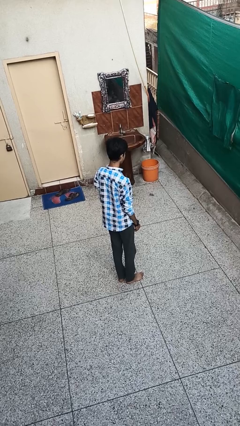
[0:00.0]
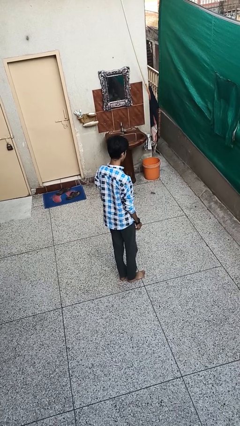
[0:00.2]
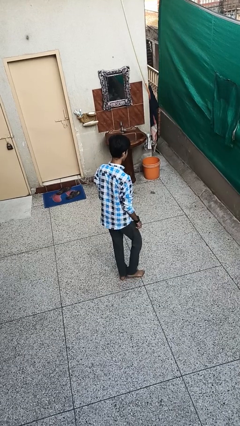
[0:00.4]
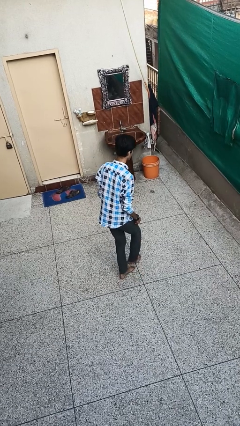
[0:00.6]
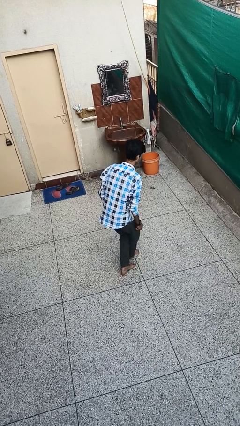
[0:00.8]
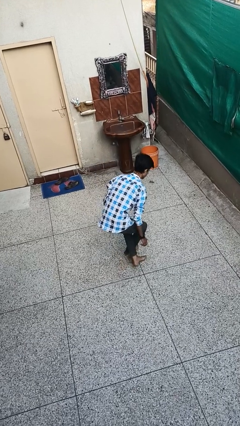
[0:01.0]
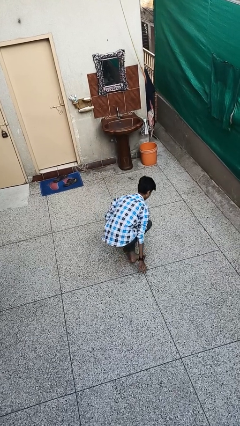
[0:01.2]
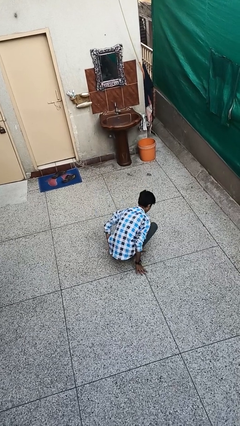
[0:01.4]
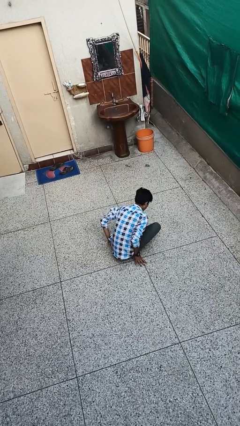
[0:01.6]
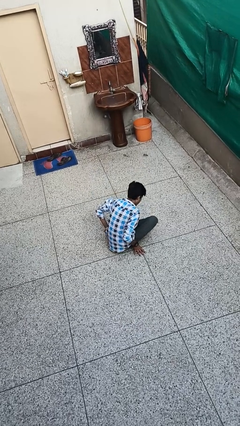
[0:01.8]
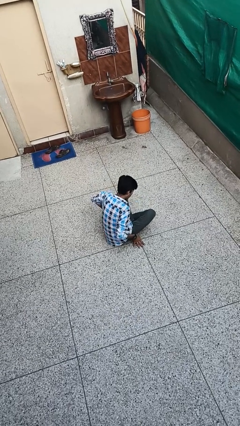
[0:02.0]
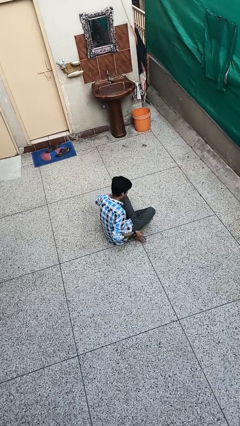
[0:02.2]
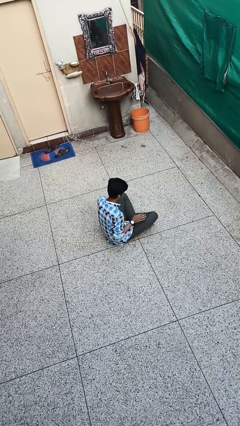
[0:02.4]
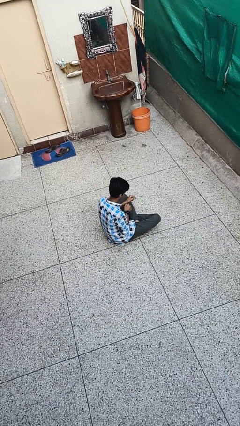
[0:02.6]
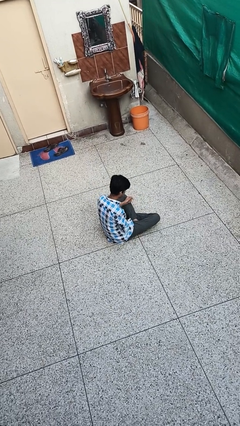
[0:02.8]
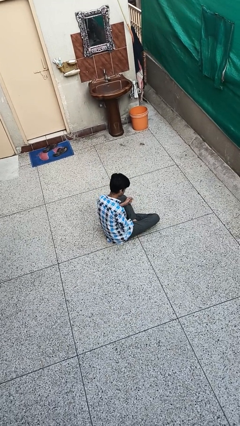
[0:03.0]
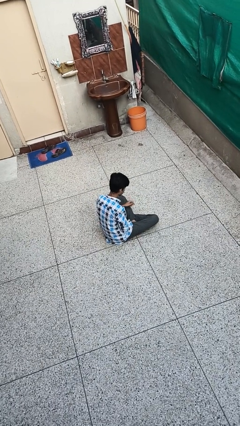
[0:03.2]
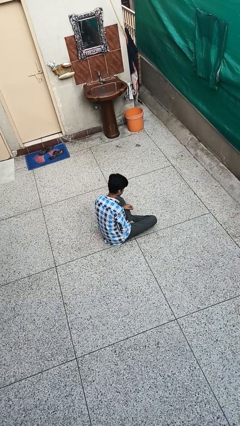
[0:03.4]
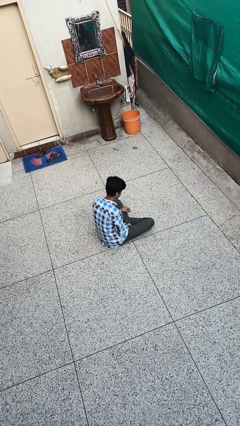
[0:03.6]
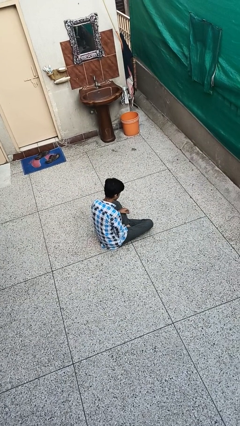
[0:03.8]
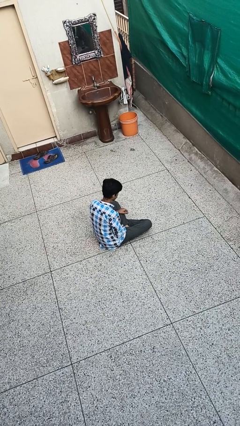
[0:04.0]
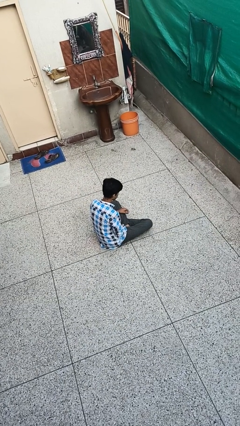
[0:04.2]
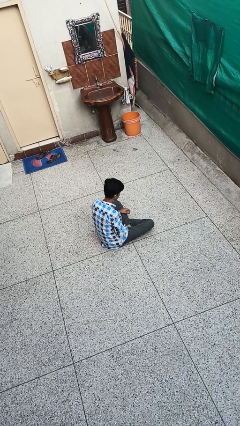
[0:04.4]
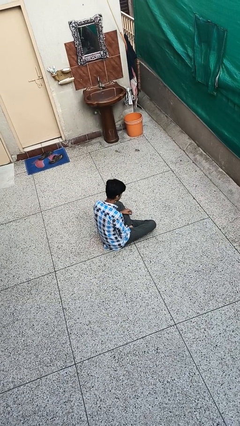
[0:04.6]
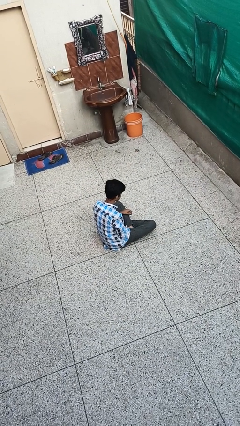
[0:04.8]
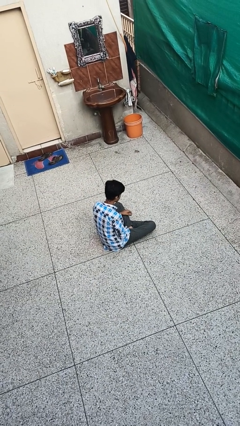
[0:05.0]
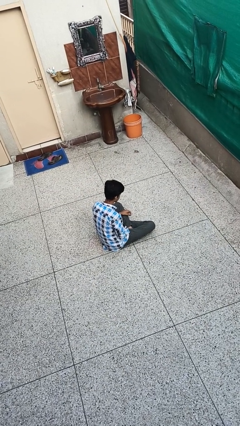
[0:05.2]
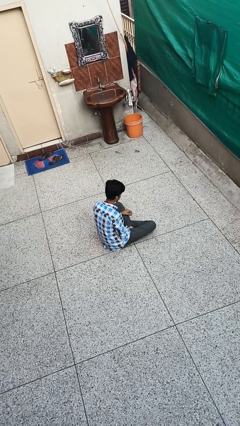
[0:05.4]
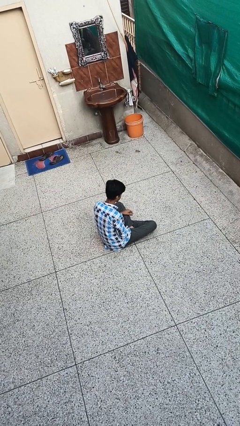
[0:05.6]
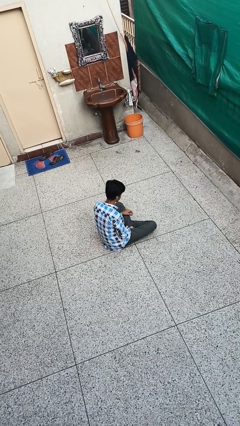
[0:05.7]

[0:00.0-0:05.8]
person sits crisscross

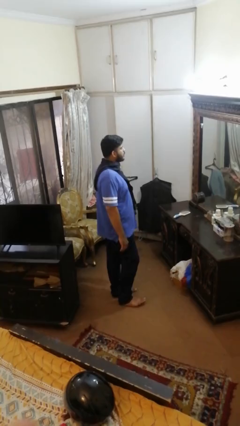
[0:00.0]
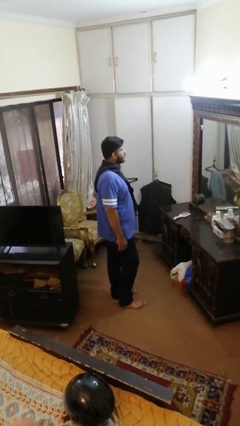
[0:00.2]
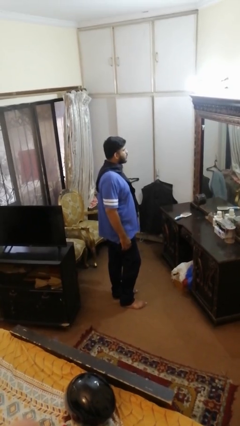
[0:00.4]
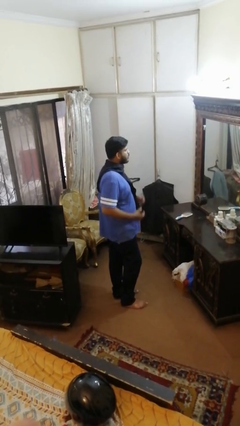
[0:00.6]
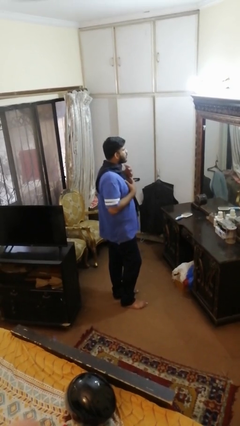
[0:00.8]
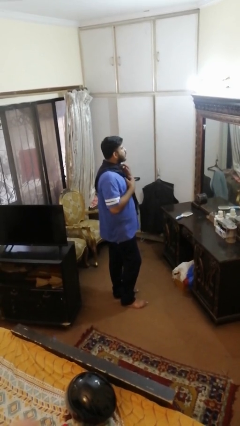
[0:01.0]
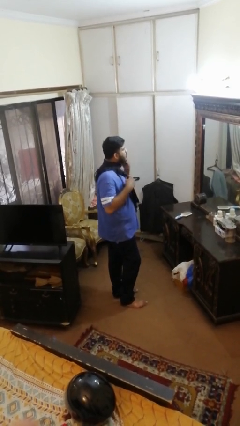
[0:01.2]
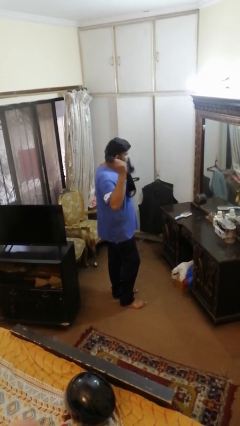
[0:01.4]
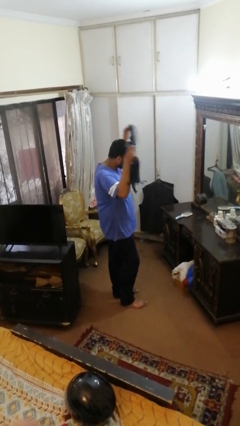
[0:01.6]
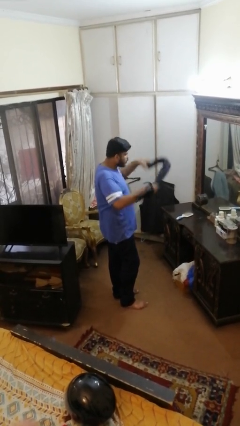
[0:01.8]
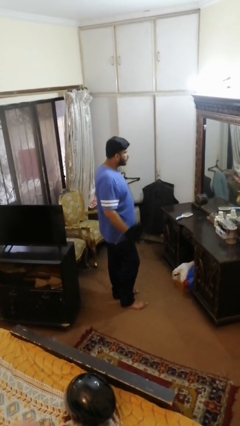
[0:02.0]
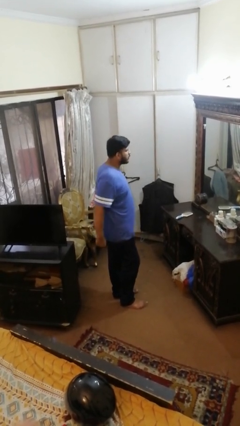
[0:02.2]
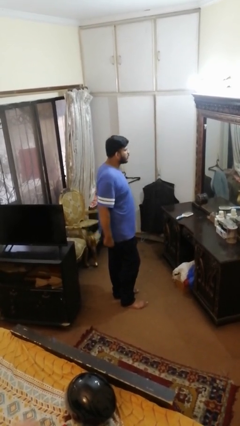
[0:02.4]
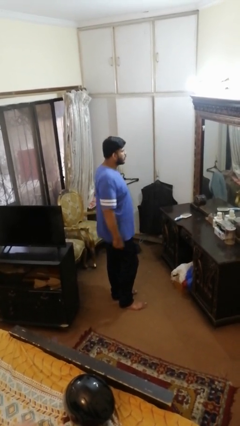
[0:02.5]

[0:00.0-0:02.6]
person takes off scarf

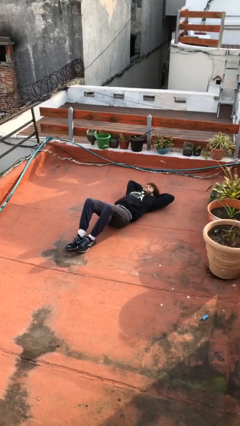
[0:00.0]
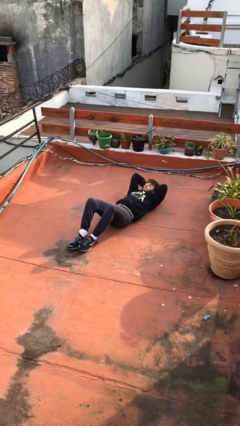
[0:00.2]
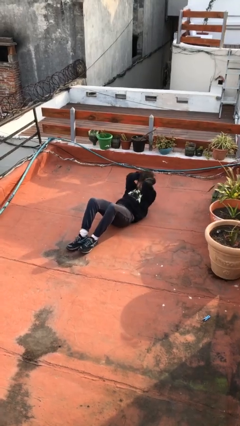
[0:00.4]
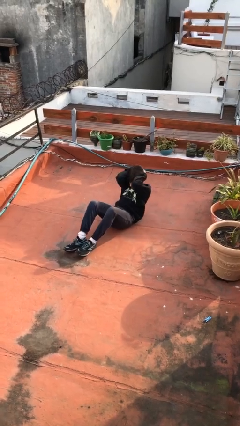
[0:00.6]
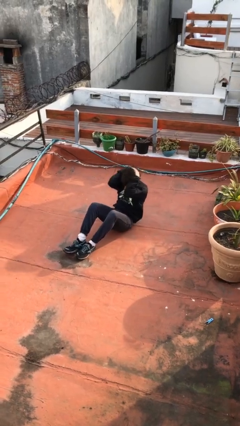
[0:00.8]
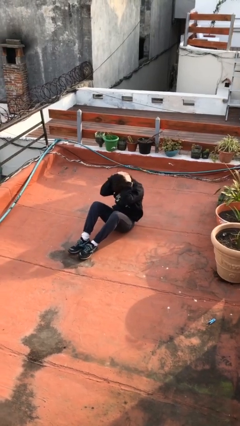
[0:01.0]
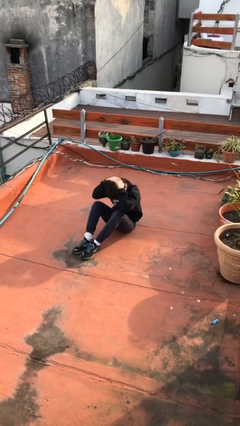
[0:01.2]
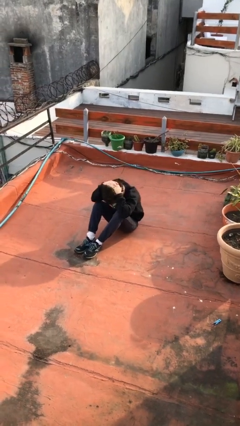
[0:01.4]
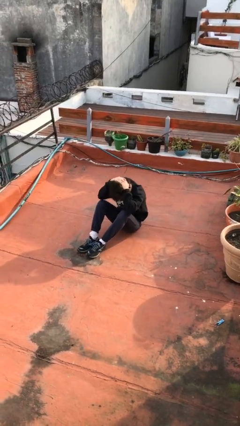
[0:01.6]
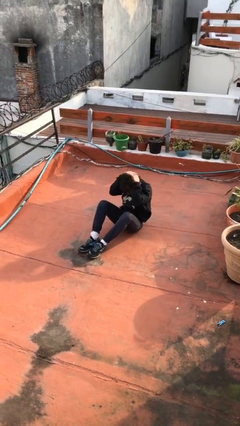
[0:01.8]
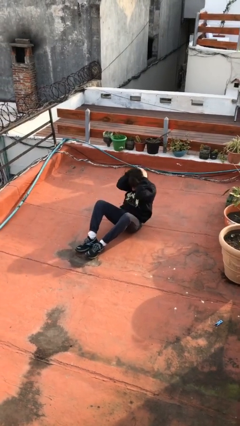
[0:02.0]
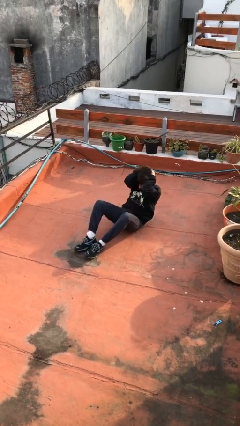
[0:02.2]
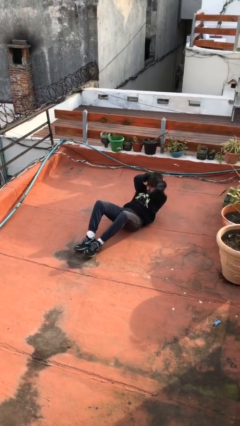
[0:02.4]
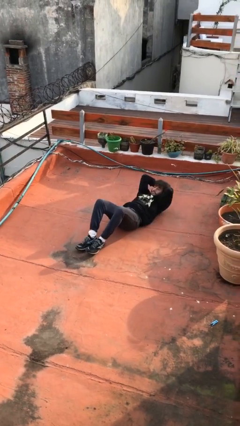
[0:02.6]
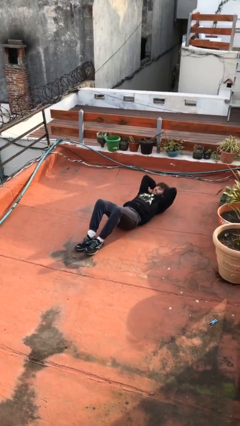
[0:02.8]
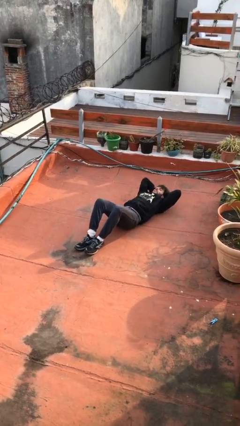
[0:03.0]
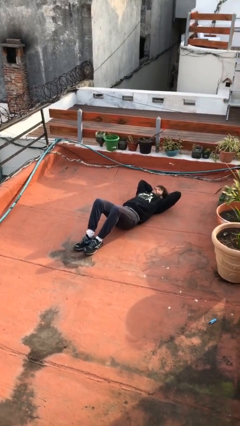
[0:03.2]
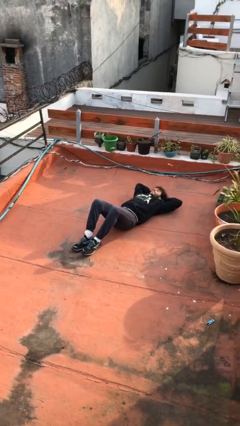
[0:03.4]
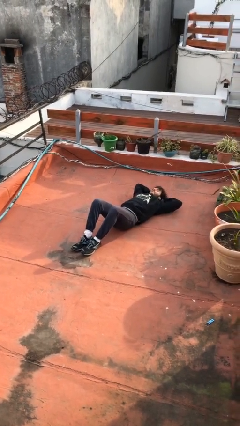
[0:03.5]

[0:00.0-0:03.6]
person exercises with situp

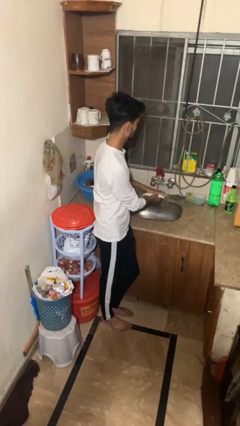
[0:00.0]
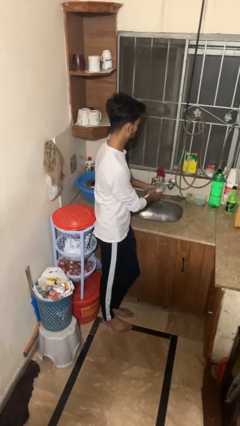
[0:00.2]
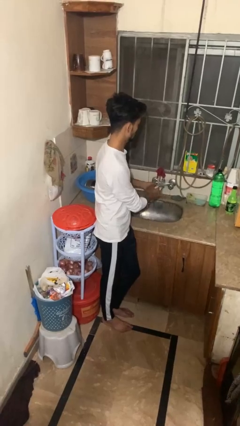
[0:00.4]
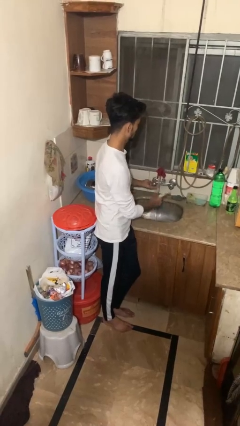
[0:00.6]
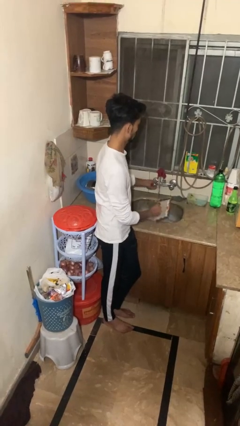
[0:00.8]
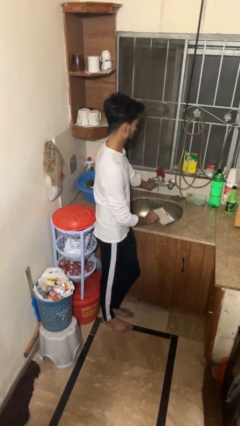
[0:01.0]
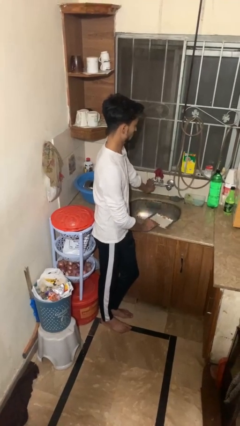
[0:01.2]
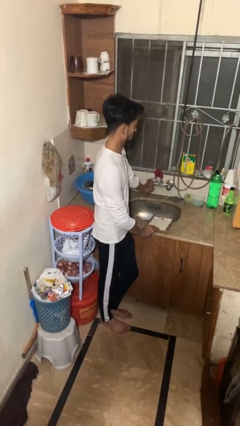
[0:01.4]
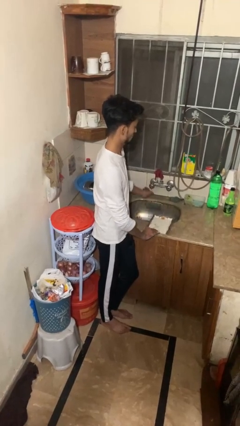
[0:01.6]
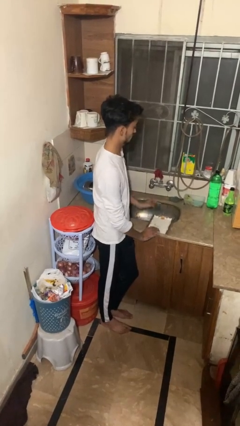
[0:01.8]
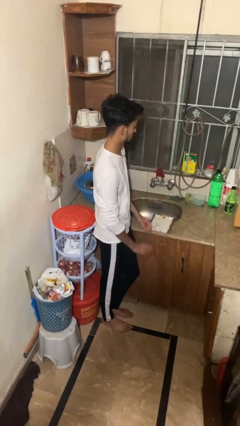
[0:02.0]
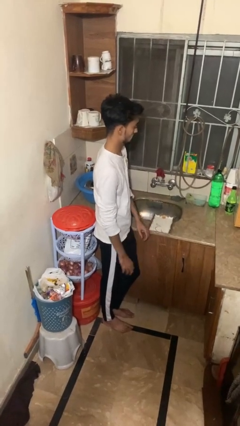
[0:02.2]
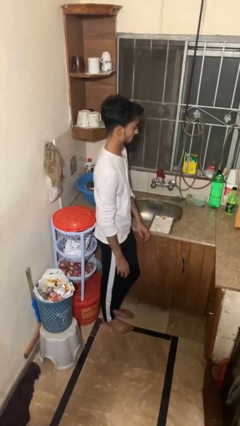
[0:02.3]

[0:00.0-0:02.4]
person closes dishwasher

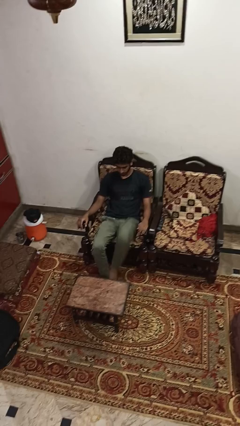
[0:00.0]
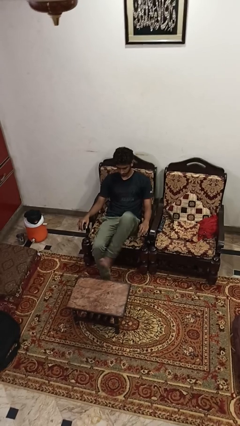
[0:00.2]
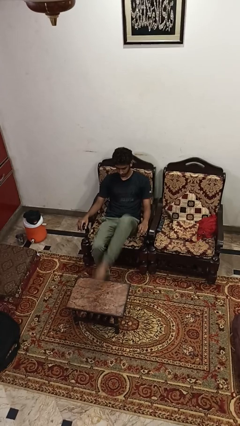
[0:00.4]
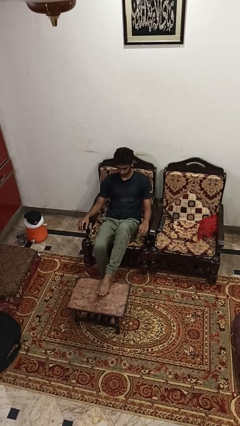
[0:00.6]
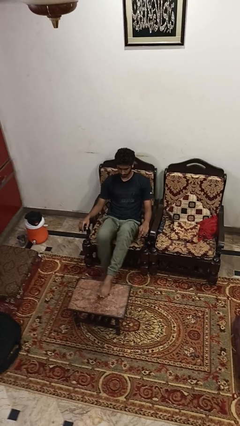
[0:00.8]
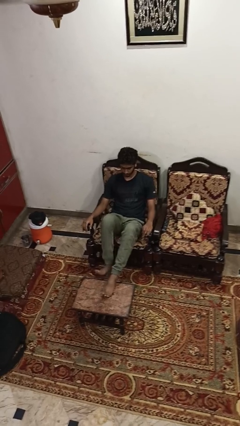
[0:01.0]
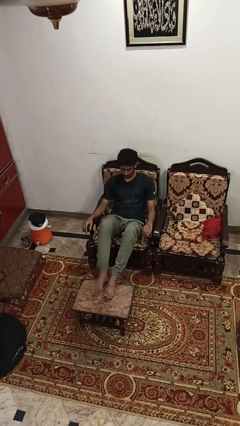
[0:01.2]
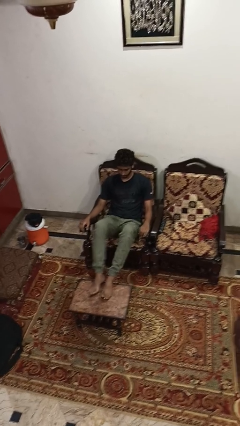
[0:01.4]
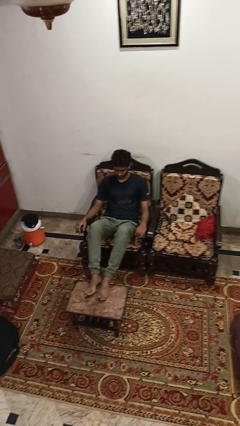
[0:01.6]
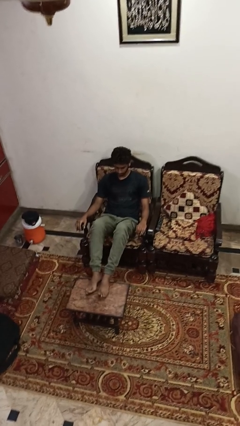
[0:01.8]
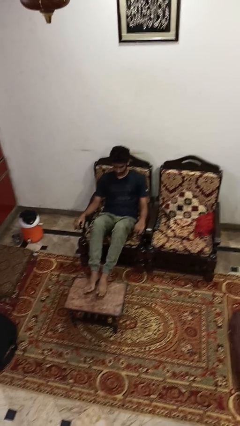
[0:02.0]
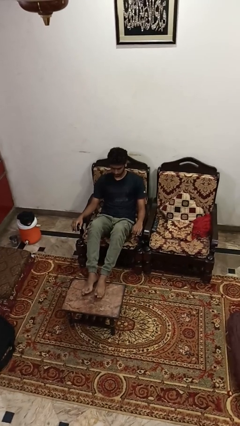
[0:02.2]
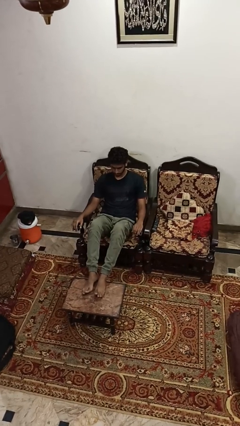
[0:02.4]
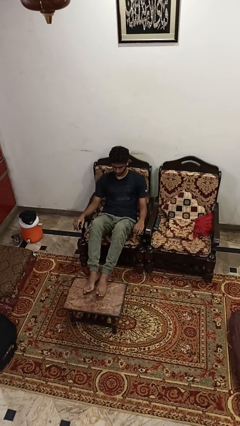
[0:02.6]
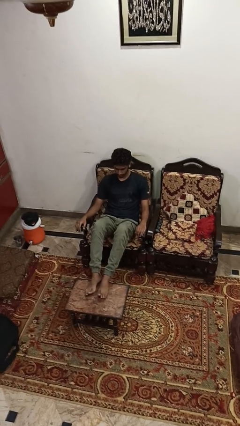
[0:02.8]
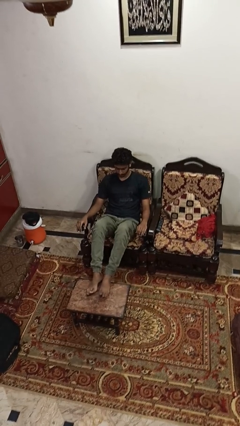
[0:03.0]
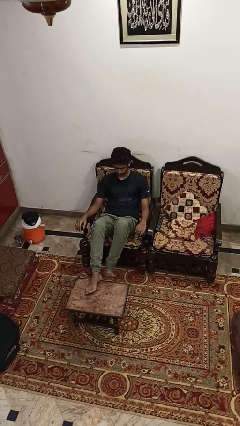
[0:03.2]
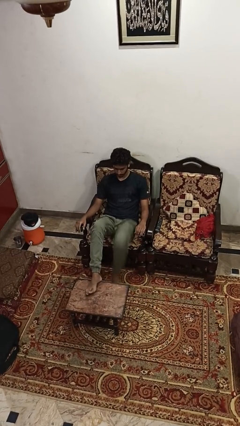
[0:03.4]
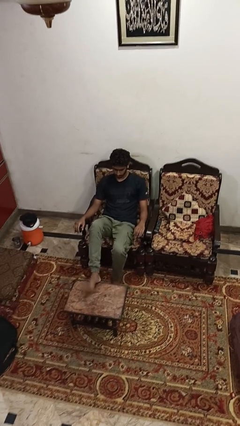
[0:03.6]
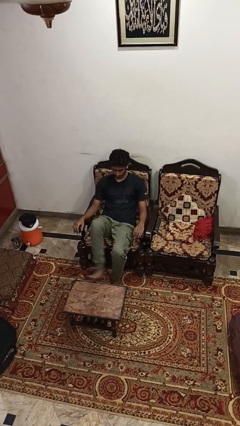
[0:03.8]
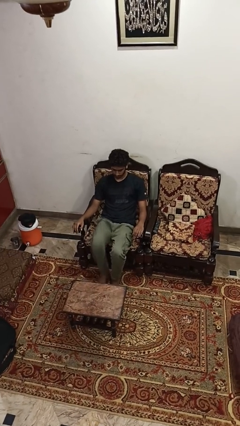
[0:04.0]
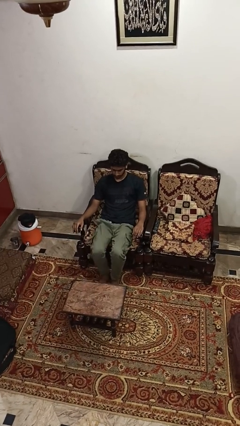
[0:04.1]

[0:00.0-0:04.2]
person puts feet up
